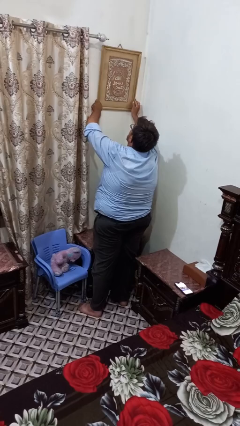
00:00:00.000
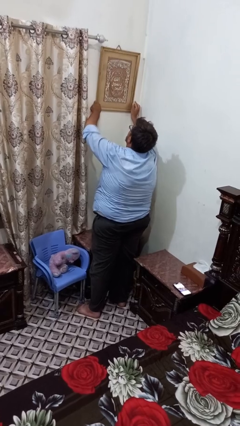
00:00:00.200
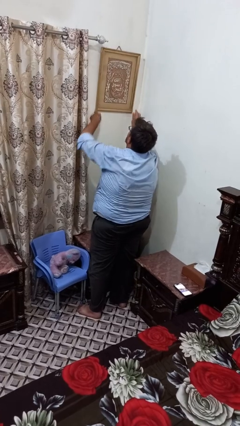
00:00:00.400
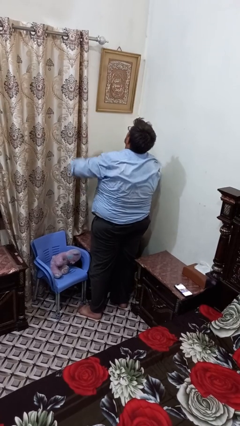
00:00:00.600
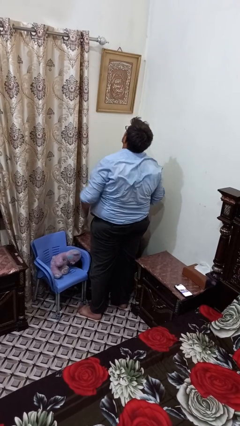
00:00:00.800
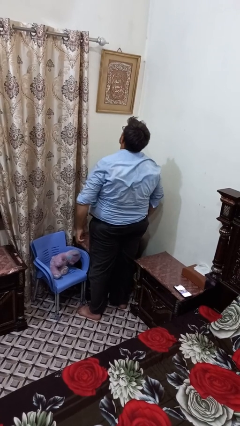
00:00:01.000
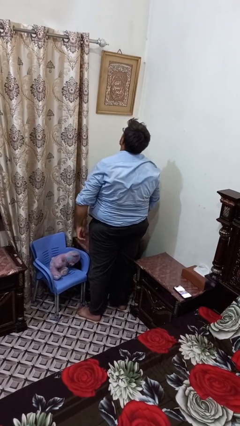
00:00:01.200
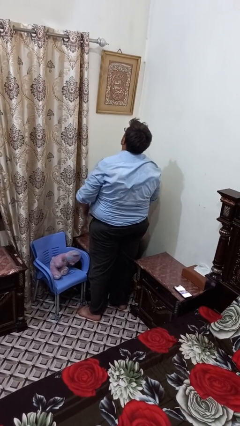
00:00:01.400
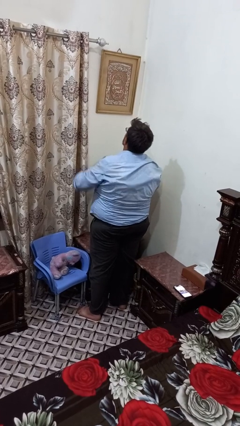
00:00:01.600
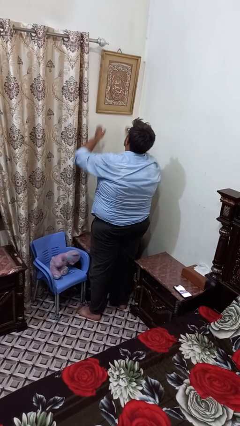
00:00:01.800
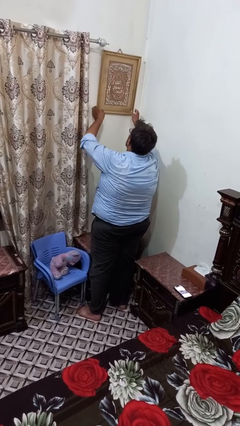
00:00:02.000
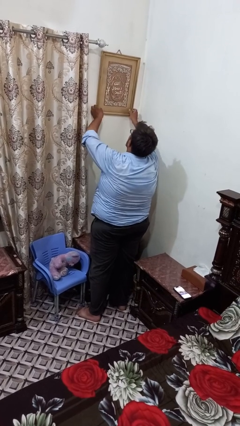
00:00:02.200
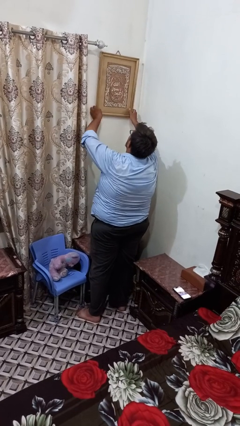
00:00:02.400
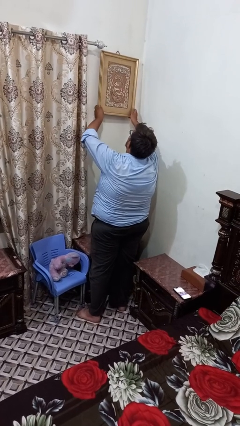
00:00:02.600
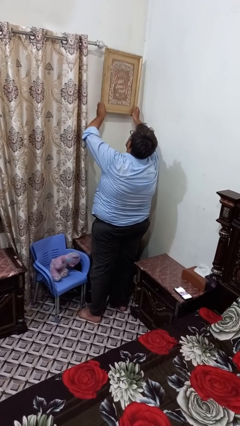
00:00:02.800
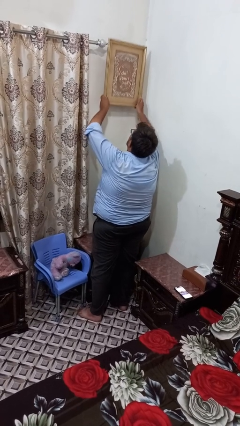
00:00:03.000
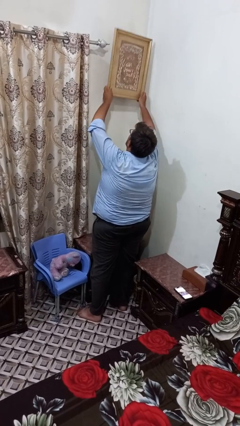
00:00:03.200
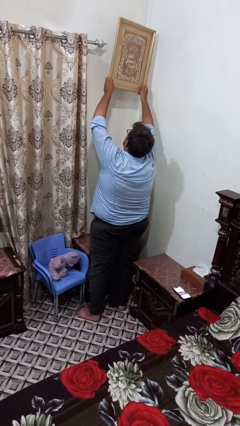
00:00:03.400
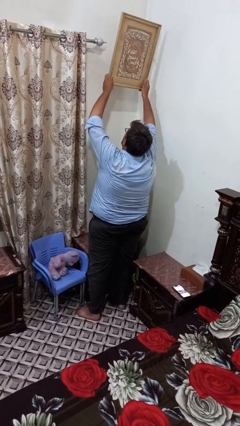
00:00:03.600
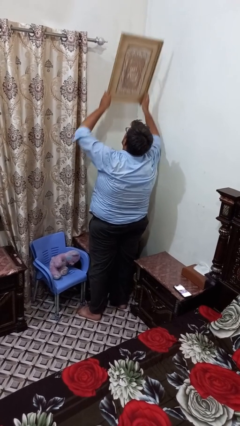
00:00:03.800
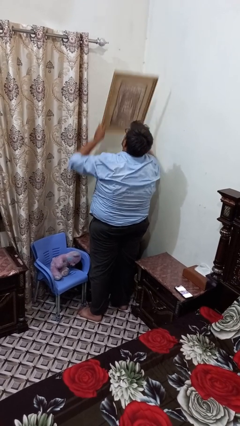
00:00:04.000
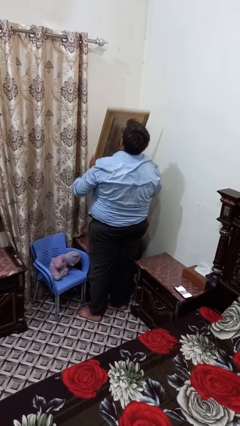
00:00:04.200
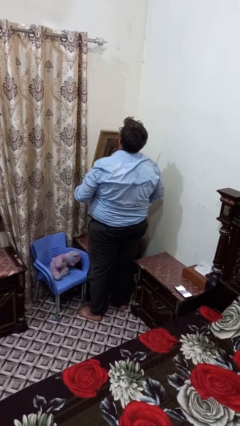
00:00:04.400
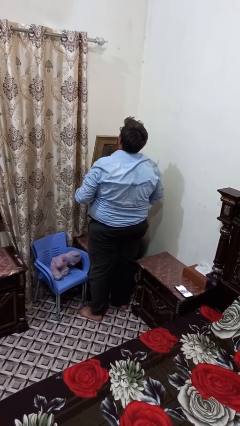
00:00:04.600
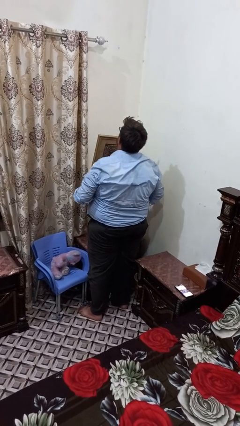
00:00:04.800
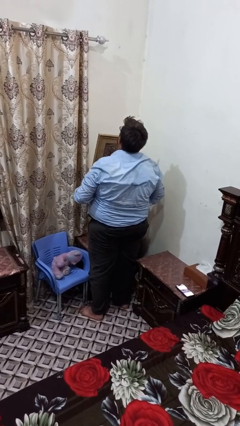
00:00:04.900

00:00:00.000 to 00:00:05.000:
person takes down picture frame

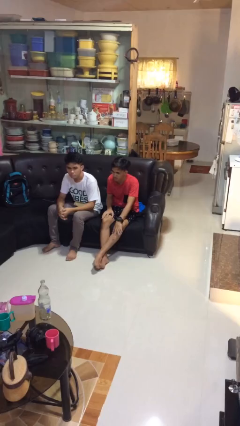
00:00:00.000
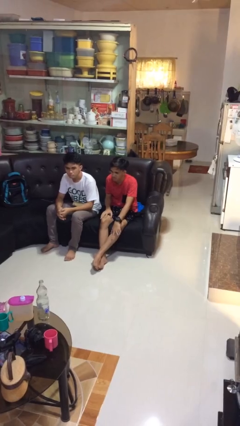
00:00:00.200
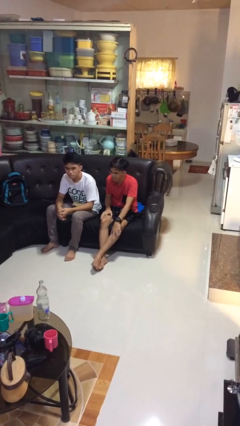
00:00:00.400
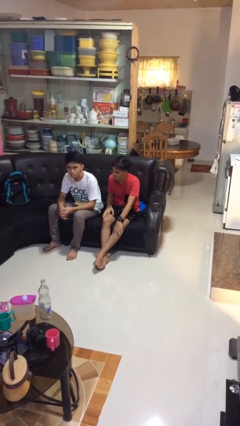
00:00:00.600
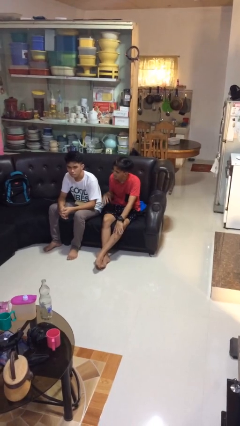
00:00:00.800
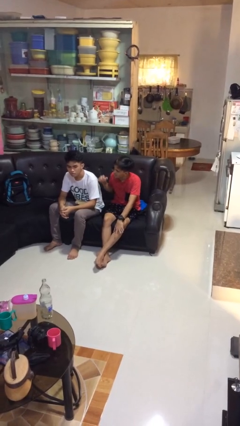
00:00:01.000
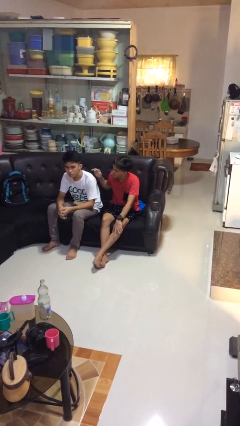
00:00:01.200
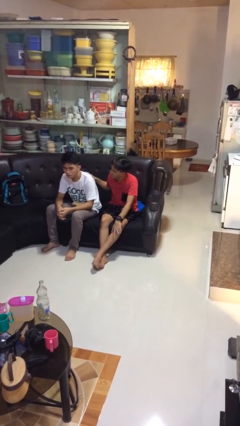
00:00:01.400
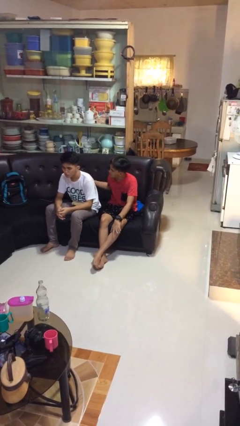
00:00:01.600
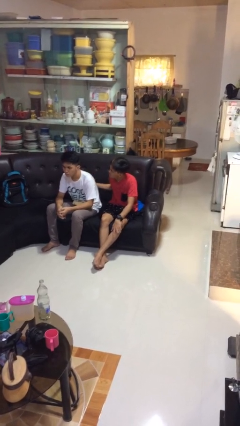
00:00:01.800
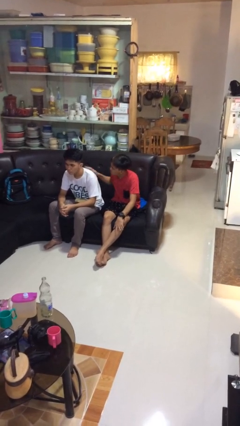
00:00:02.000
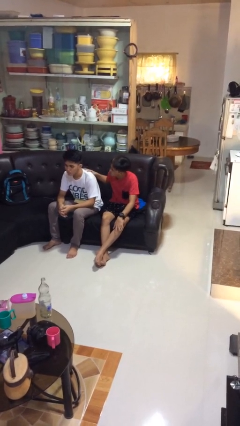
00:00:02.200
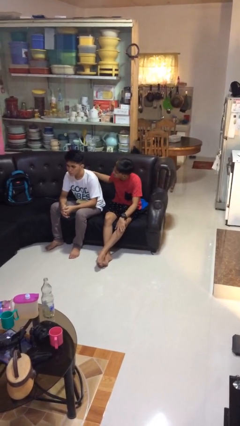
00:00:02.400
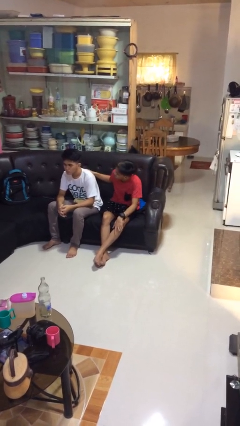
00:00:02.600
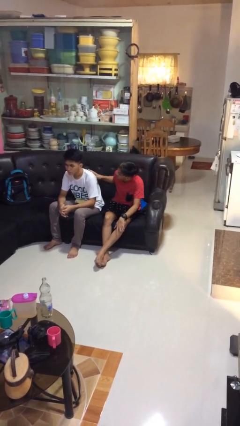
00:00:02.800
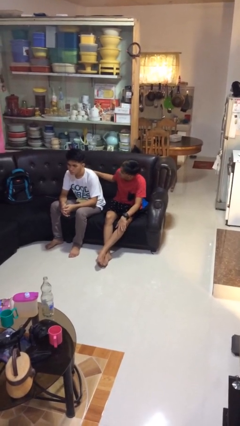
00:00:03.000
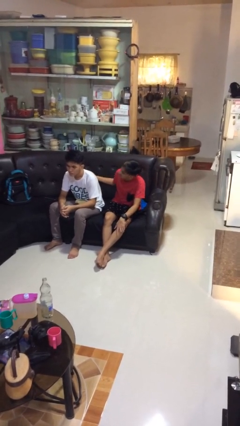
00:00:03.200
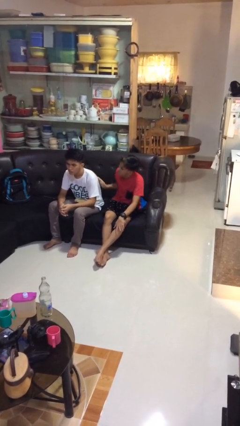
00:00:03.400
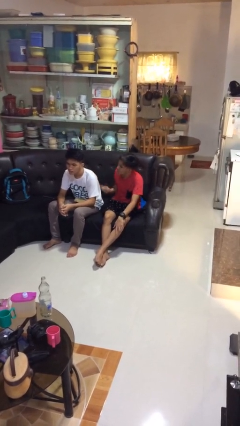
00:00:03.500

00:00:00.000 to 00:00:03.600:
person touches back of person

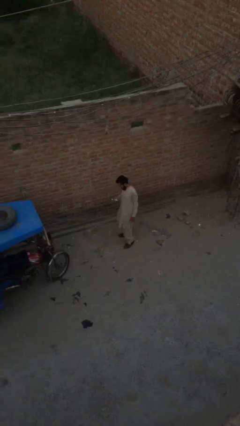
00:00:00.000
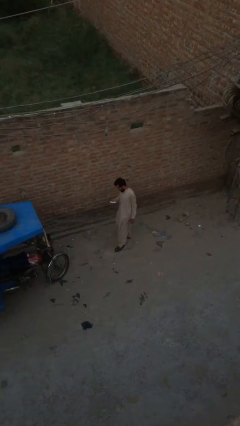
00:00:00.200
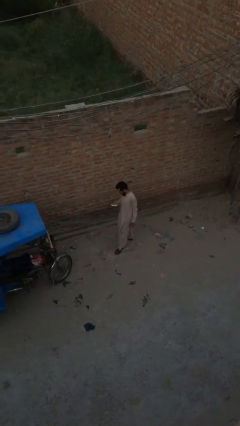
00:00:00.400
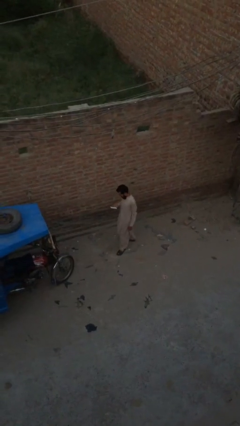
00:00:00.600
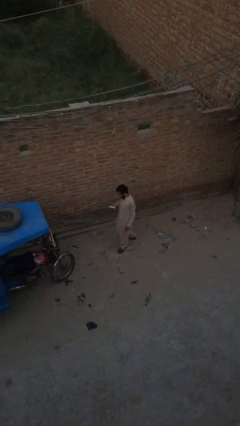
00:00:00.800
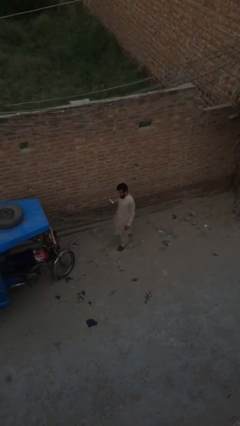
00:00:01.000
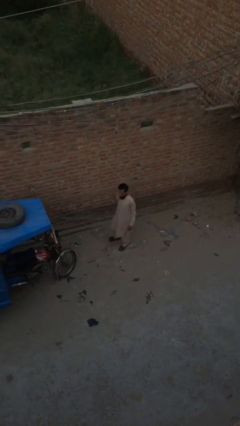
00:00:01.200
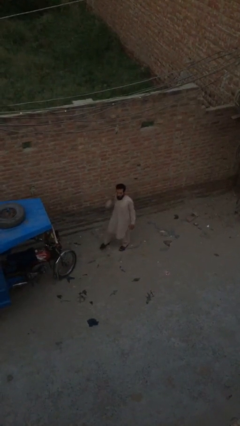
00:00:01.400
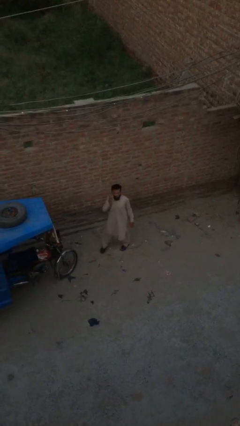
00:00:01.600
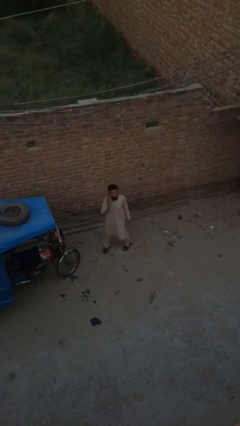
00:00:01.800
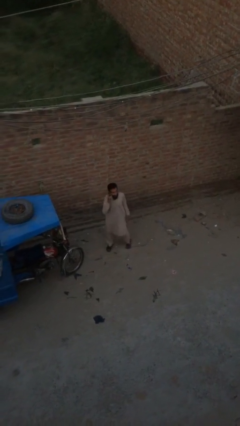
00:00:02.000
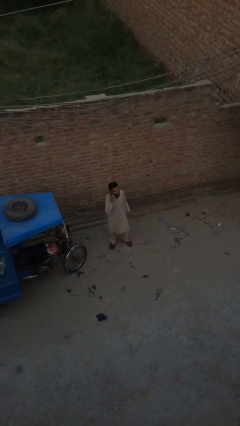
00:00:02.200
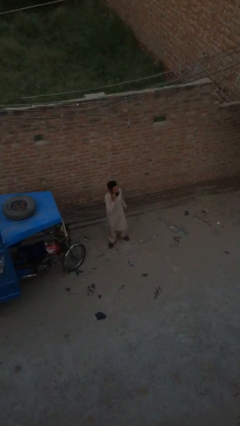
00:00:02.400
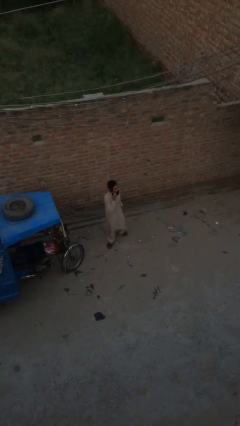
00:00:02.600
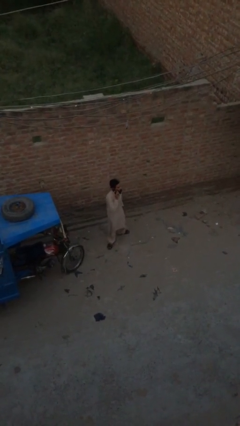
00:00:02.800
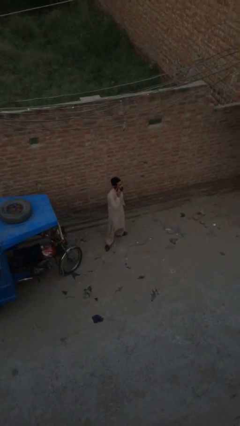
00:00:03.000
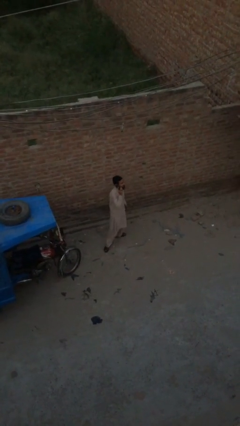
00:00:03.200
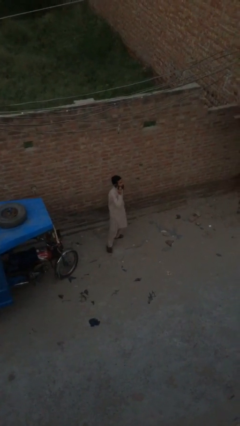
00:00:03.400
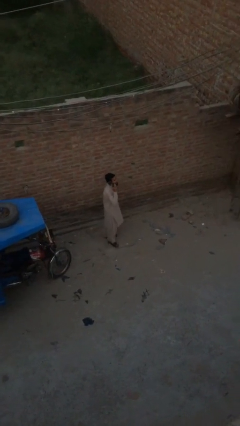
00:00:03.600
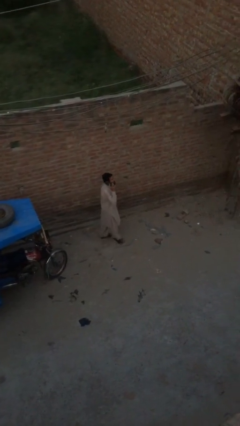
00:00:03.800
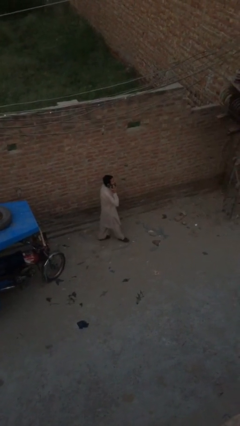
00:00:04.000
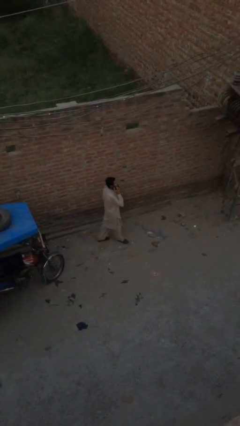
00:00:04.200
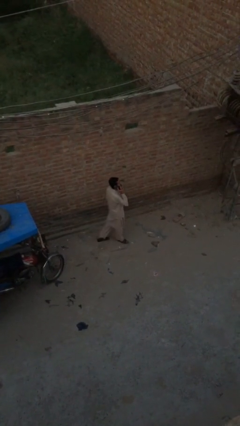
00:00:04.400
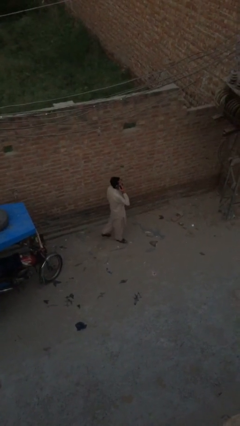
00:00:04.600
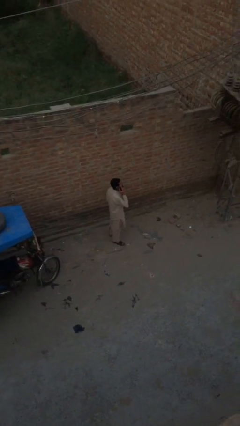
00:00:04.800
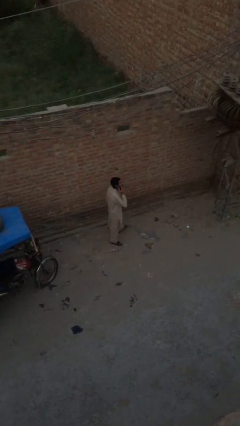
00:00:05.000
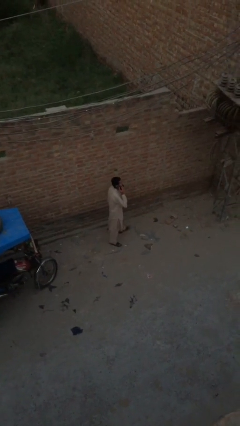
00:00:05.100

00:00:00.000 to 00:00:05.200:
person talks on phone

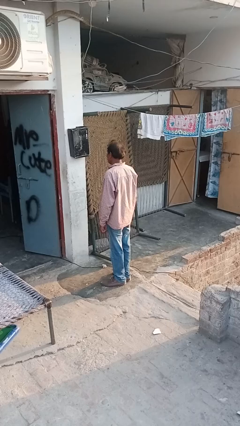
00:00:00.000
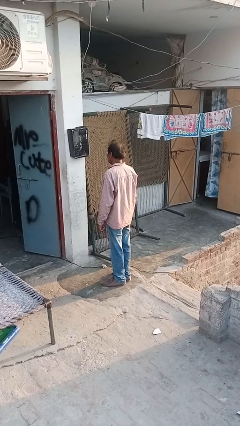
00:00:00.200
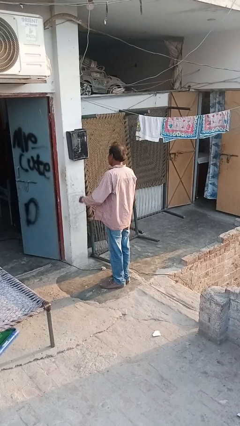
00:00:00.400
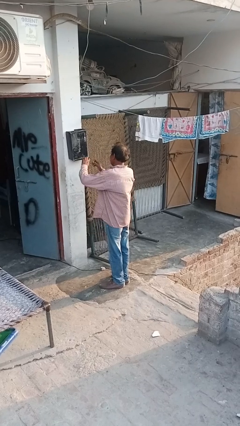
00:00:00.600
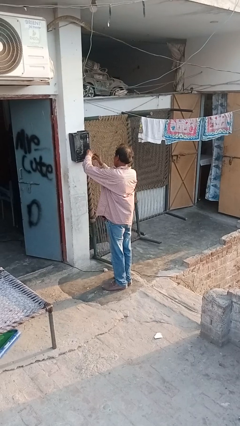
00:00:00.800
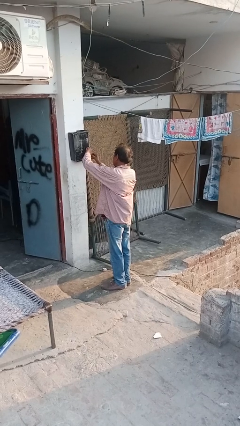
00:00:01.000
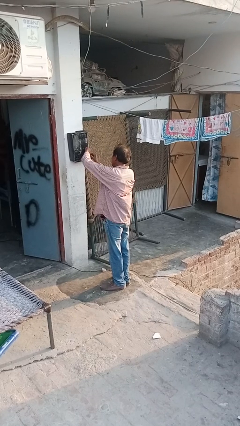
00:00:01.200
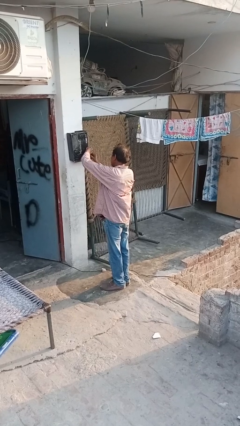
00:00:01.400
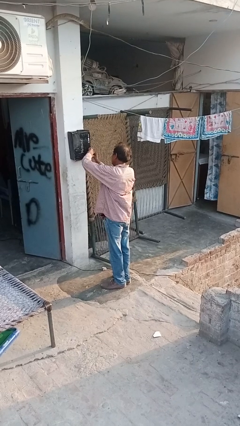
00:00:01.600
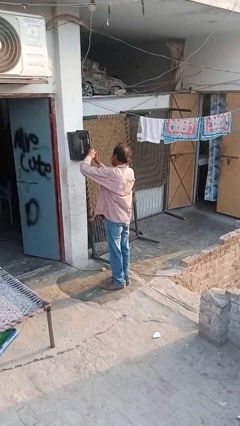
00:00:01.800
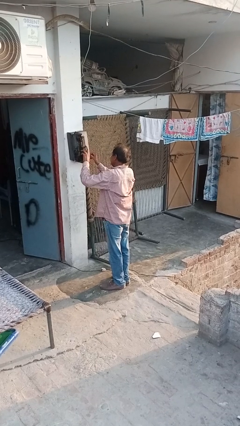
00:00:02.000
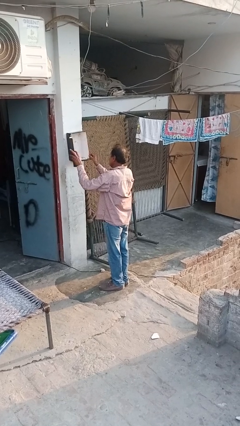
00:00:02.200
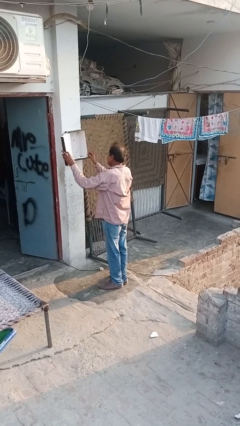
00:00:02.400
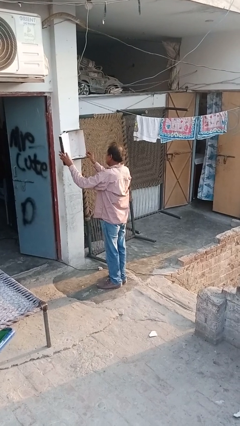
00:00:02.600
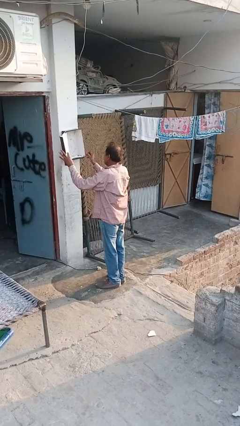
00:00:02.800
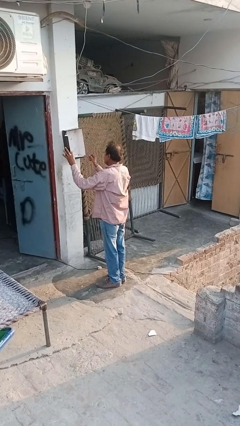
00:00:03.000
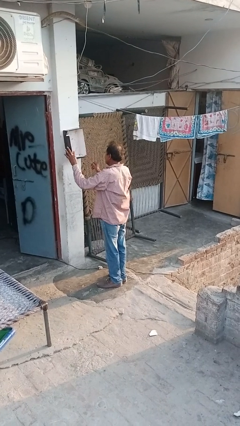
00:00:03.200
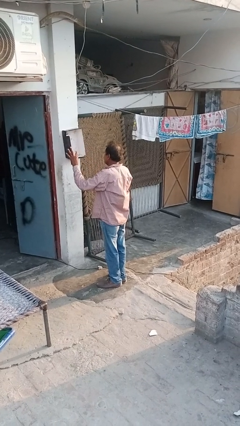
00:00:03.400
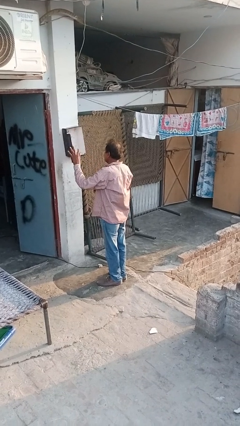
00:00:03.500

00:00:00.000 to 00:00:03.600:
person opens mailbox

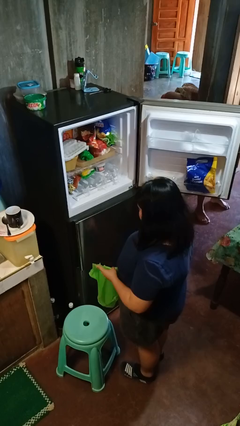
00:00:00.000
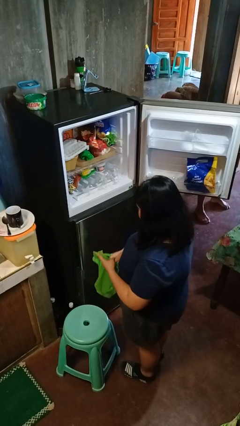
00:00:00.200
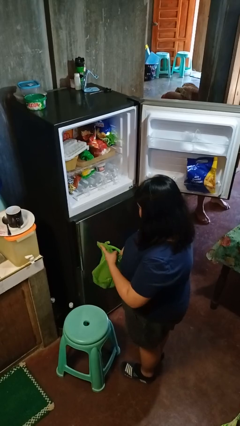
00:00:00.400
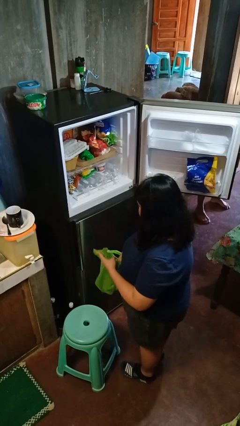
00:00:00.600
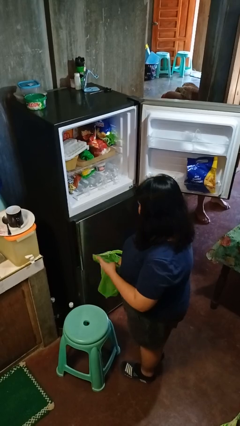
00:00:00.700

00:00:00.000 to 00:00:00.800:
person loads groceries into refrigerator
